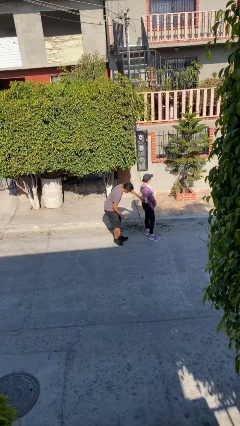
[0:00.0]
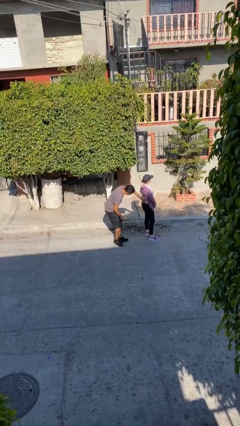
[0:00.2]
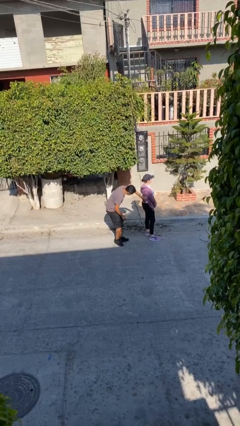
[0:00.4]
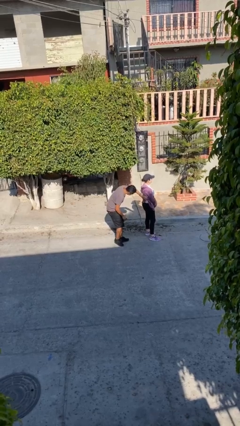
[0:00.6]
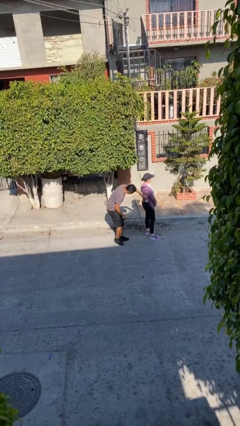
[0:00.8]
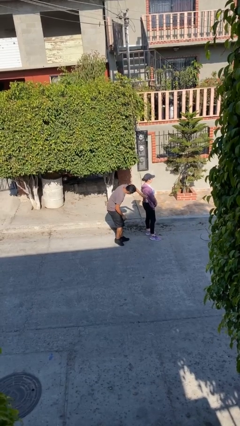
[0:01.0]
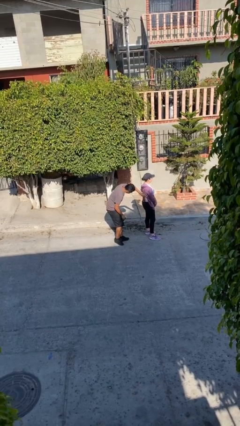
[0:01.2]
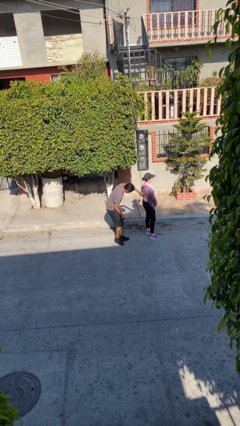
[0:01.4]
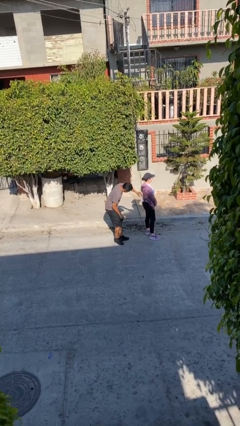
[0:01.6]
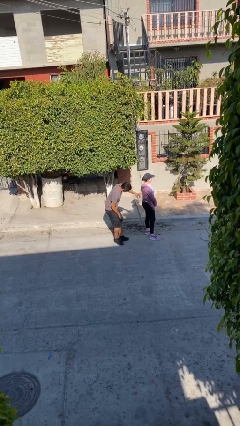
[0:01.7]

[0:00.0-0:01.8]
person steals object from person

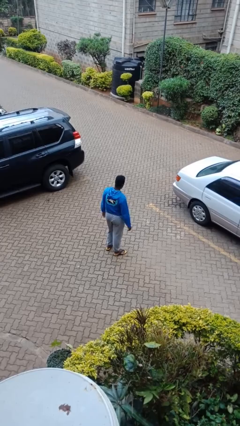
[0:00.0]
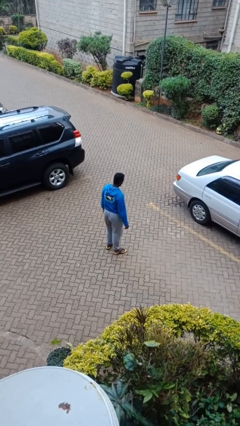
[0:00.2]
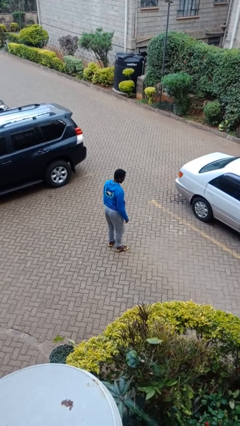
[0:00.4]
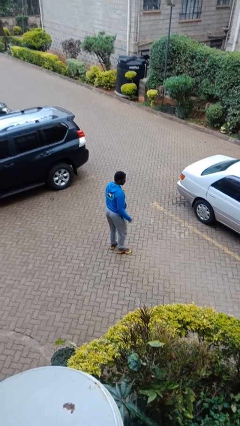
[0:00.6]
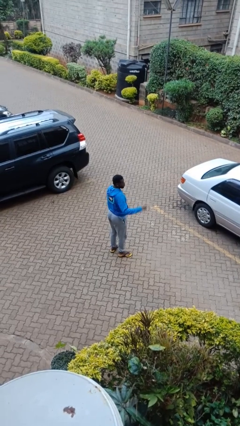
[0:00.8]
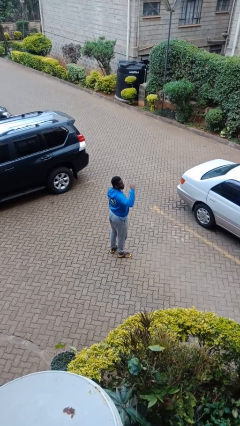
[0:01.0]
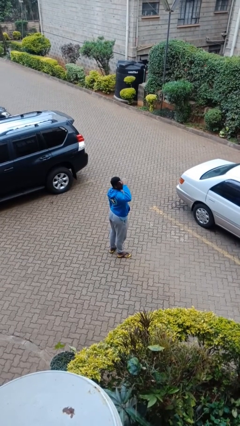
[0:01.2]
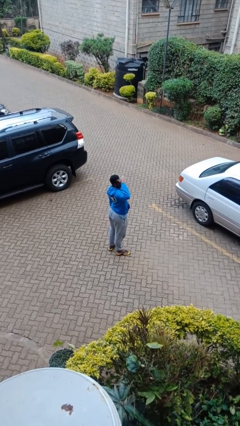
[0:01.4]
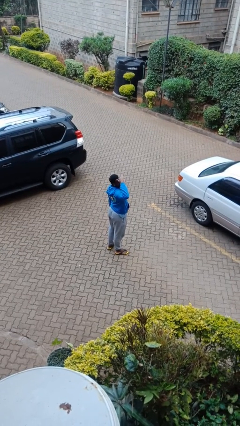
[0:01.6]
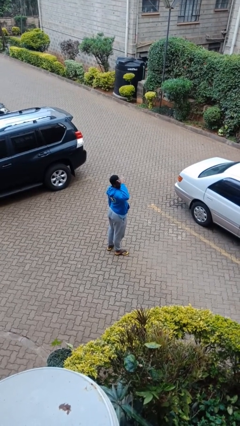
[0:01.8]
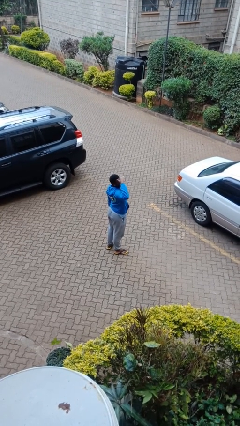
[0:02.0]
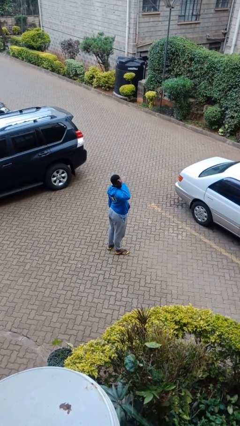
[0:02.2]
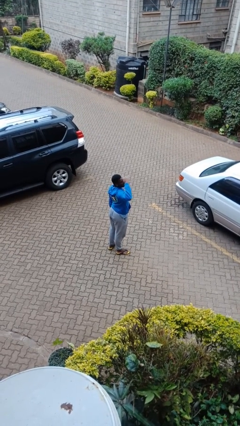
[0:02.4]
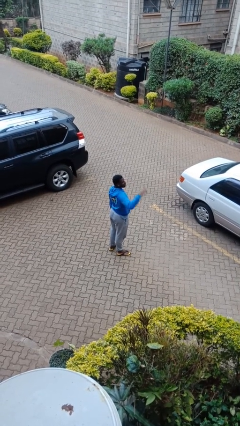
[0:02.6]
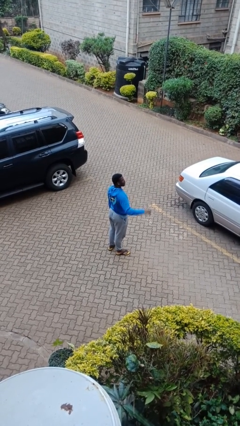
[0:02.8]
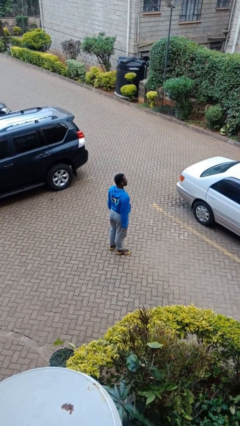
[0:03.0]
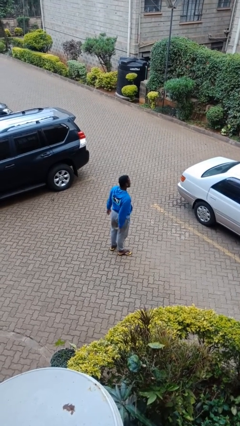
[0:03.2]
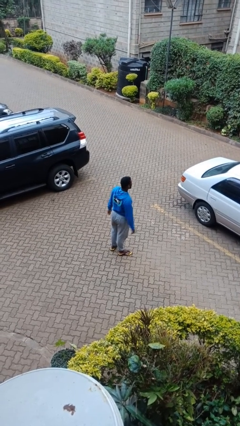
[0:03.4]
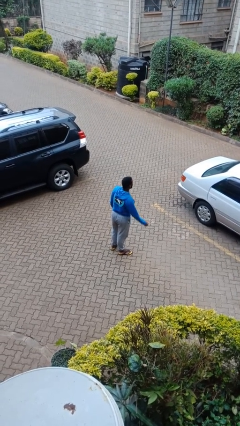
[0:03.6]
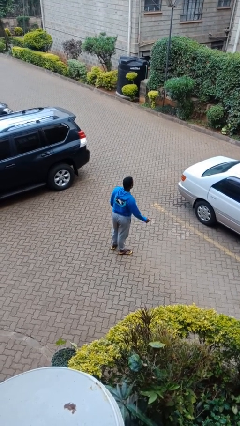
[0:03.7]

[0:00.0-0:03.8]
person shades eyes

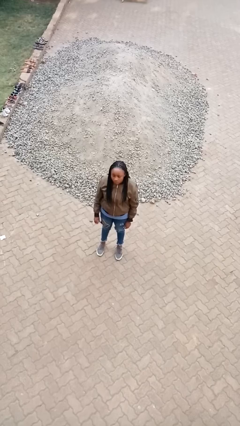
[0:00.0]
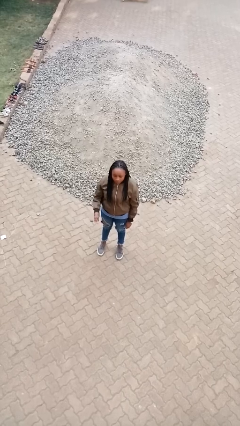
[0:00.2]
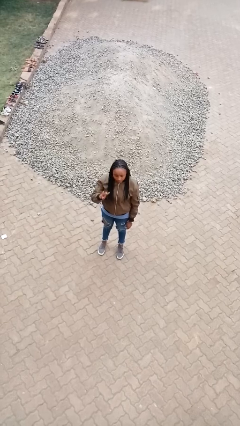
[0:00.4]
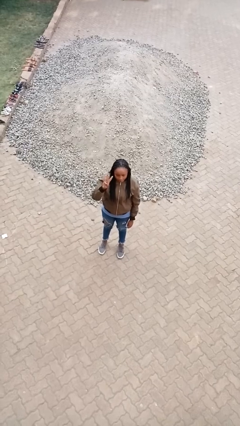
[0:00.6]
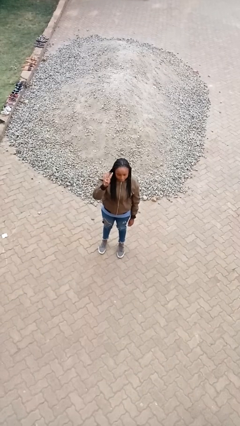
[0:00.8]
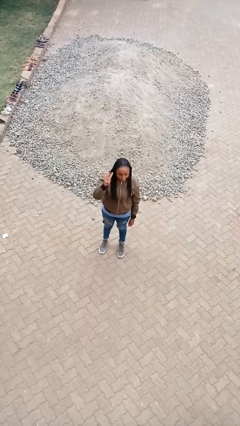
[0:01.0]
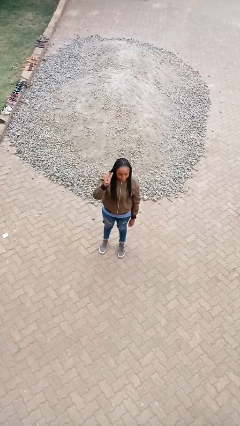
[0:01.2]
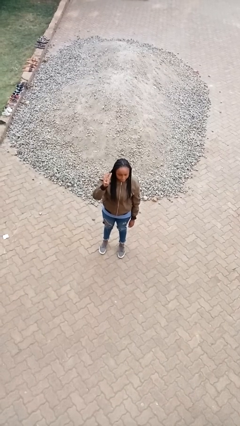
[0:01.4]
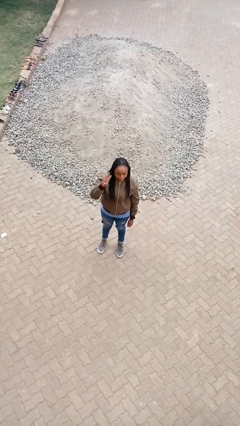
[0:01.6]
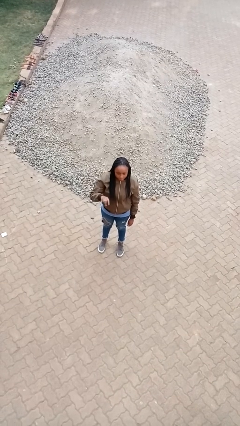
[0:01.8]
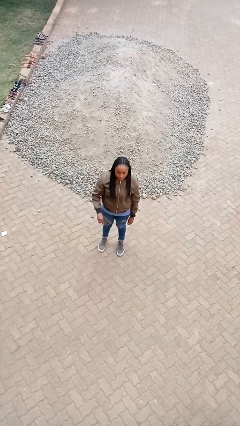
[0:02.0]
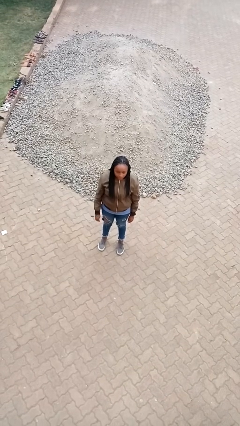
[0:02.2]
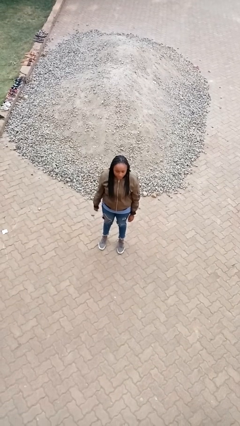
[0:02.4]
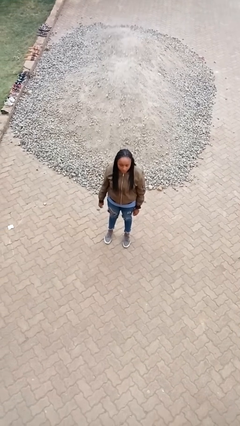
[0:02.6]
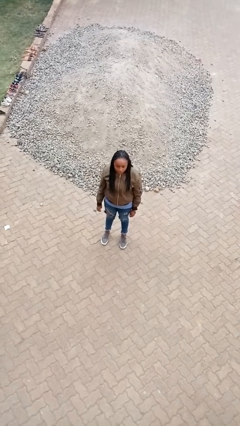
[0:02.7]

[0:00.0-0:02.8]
person gestures number three

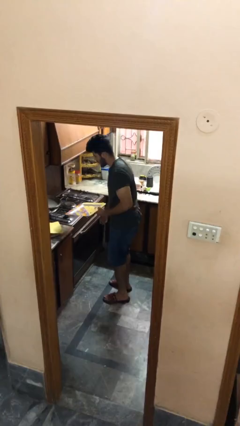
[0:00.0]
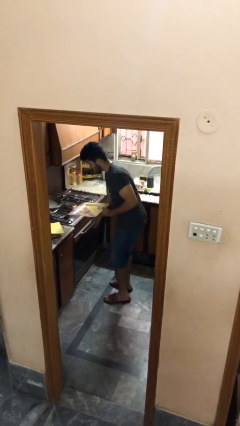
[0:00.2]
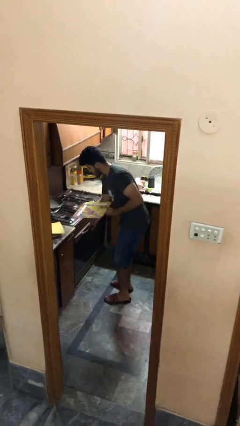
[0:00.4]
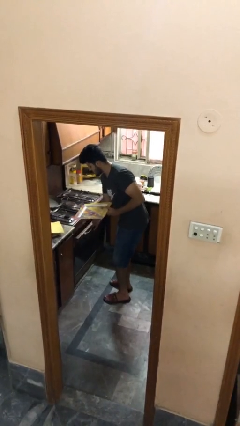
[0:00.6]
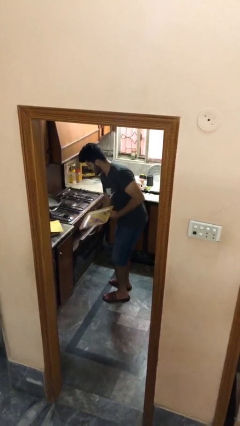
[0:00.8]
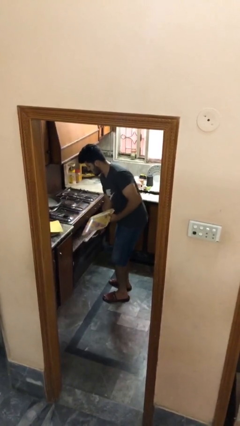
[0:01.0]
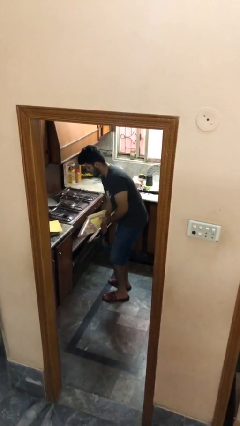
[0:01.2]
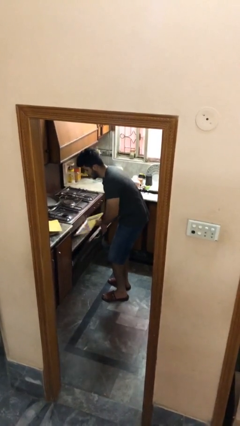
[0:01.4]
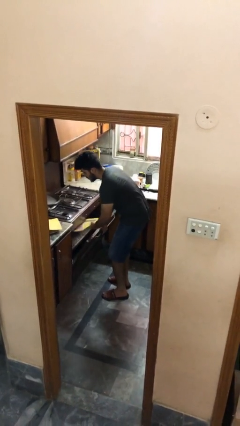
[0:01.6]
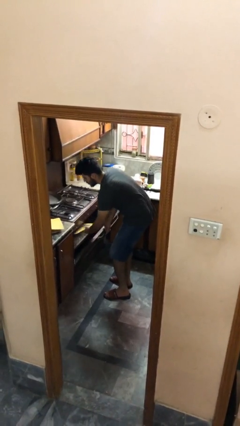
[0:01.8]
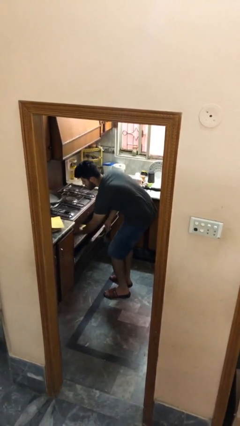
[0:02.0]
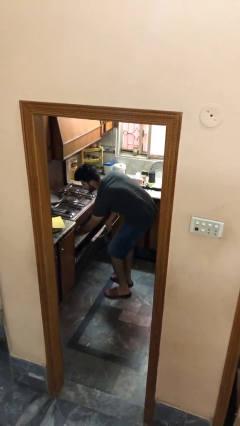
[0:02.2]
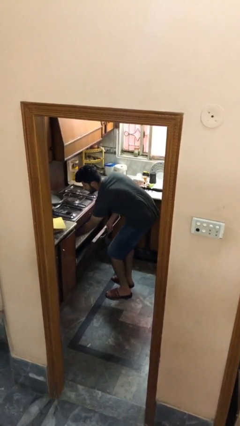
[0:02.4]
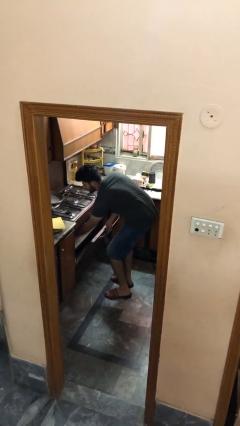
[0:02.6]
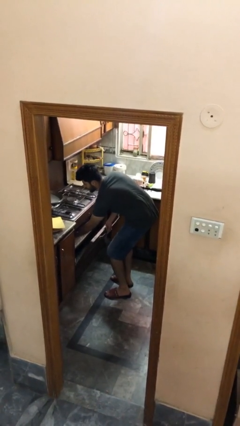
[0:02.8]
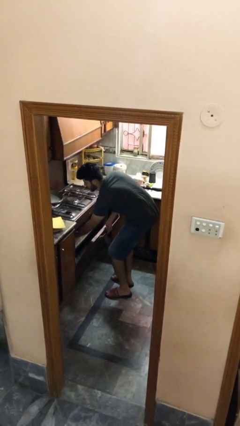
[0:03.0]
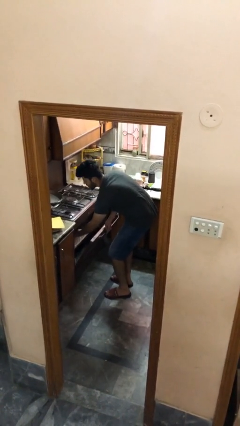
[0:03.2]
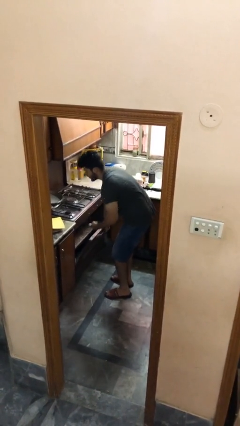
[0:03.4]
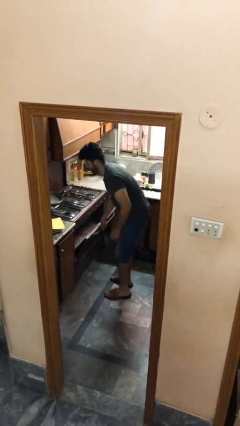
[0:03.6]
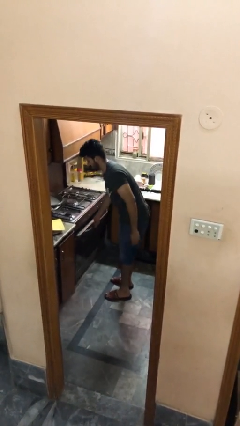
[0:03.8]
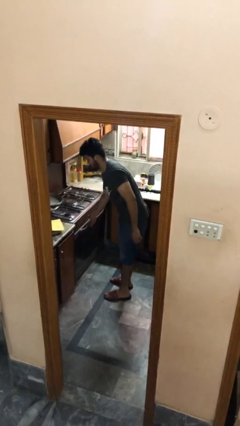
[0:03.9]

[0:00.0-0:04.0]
person puts object into oven

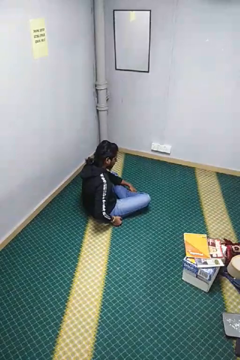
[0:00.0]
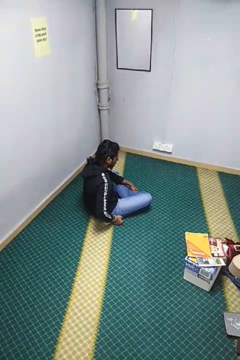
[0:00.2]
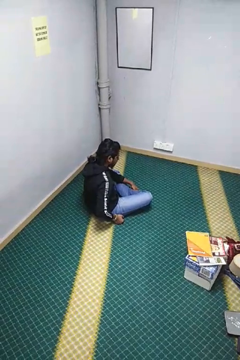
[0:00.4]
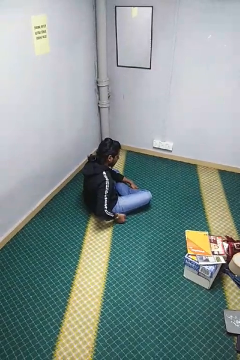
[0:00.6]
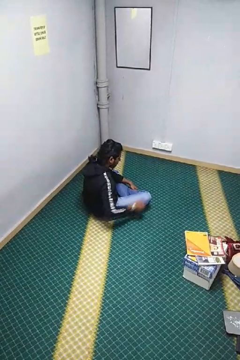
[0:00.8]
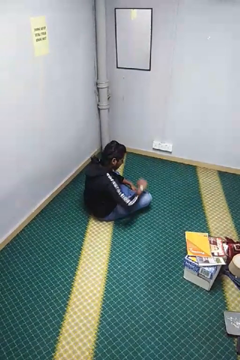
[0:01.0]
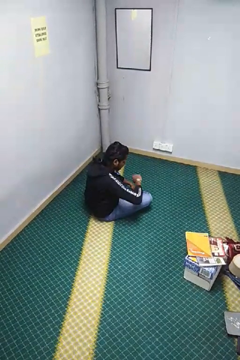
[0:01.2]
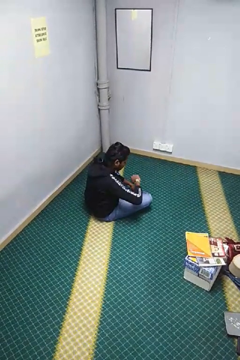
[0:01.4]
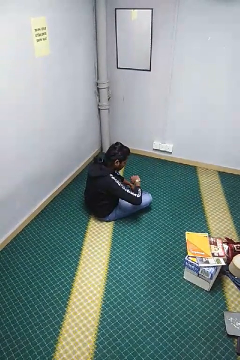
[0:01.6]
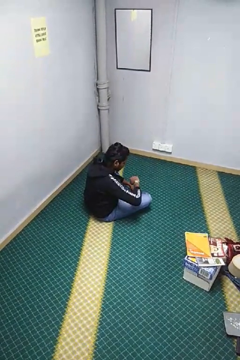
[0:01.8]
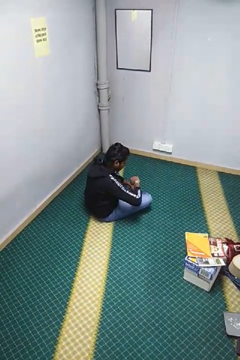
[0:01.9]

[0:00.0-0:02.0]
person looks at wristwatch

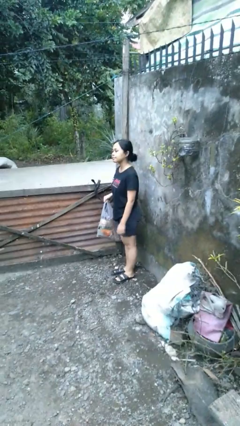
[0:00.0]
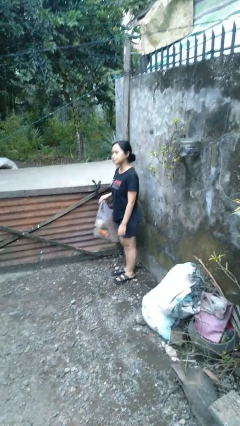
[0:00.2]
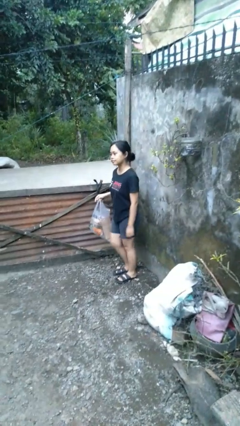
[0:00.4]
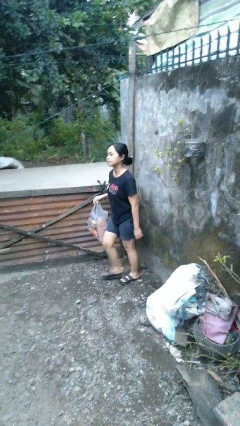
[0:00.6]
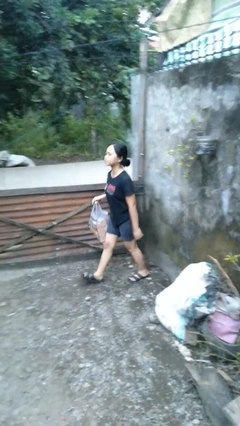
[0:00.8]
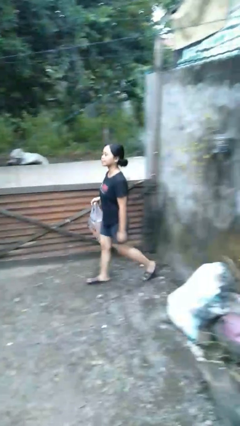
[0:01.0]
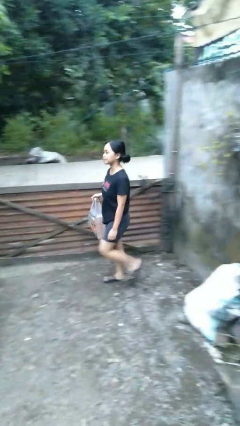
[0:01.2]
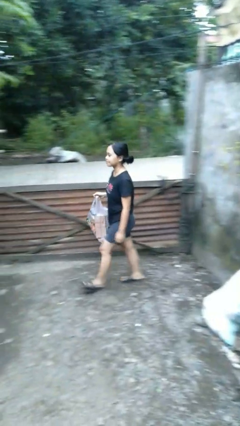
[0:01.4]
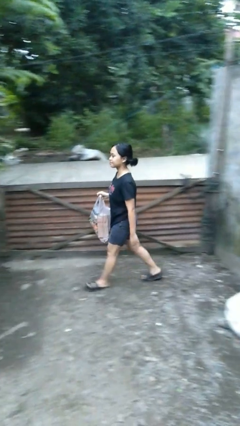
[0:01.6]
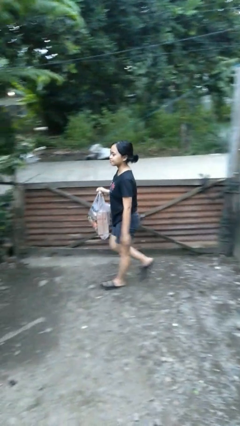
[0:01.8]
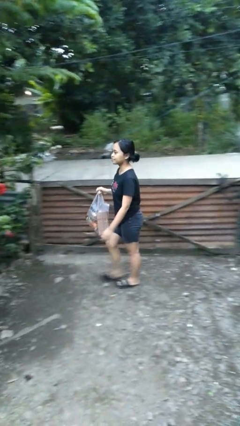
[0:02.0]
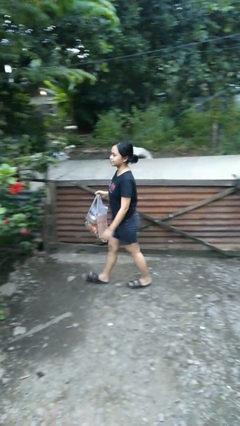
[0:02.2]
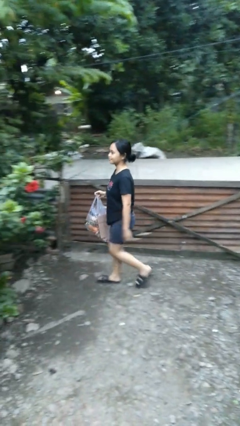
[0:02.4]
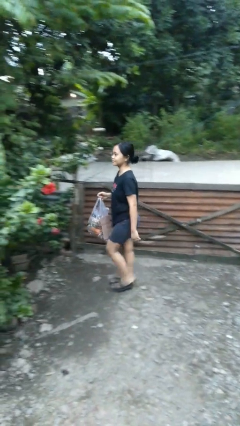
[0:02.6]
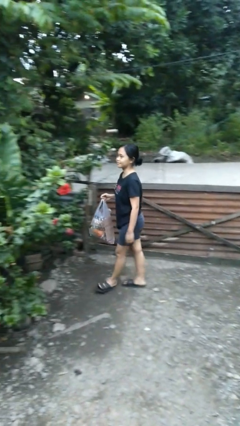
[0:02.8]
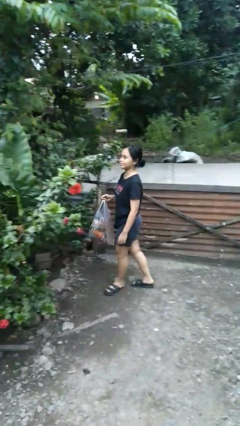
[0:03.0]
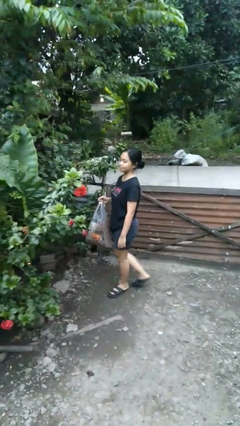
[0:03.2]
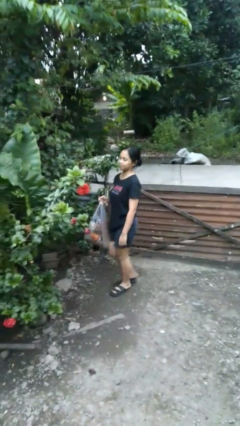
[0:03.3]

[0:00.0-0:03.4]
person carries groceries
